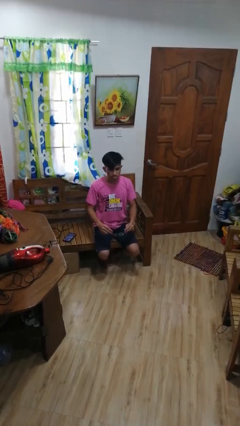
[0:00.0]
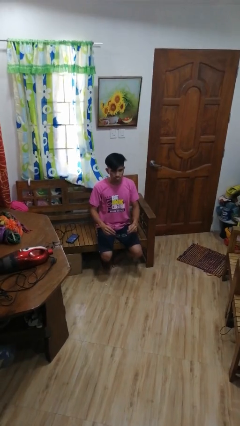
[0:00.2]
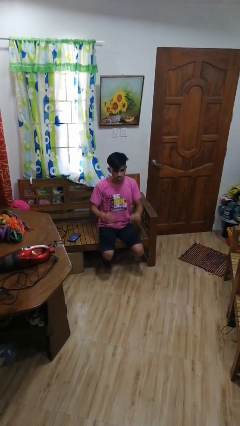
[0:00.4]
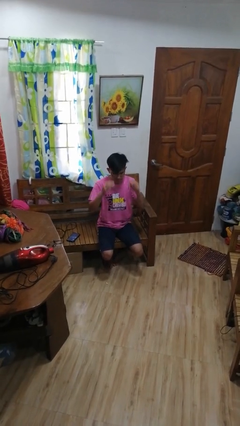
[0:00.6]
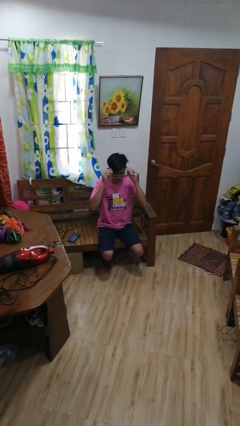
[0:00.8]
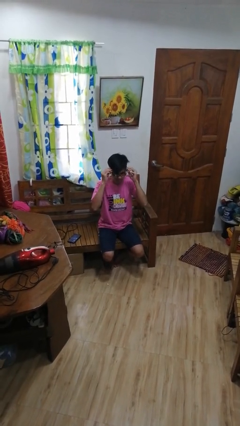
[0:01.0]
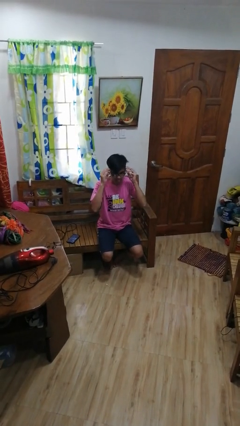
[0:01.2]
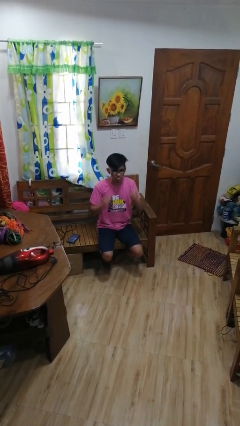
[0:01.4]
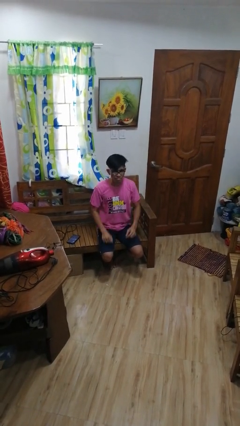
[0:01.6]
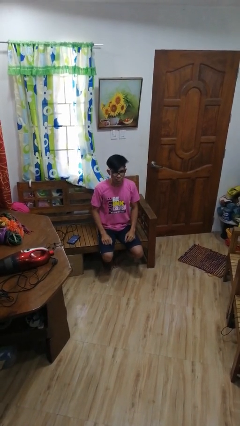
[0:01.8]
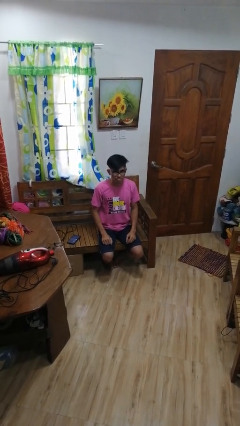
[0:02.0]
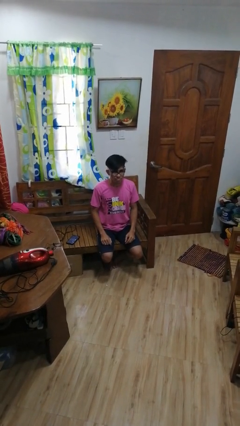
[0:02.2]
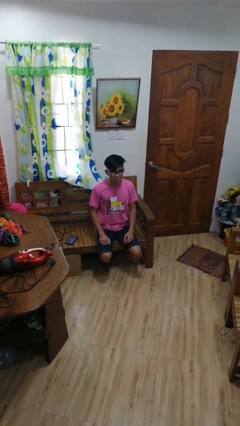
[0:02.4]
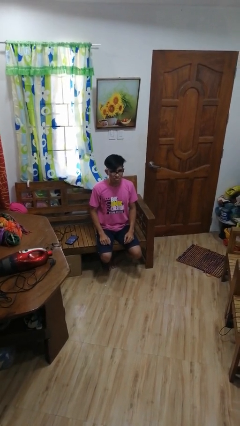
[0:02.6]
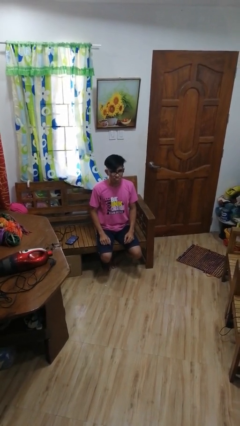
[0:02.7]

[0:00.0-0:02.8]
person puts on glasses

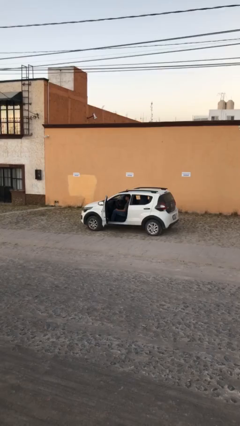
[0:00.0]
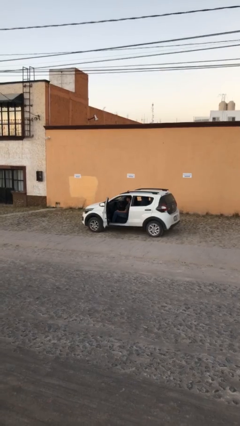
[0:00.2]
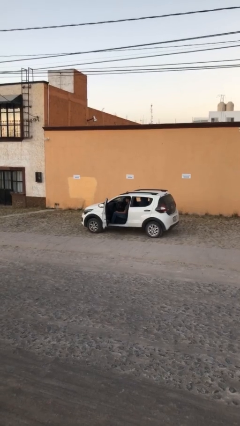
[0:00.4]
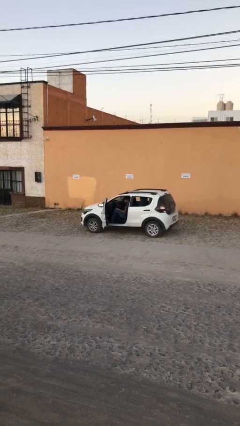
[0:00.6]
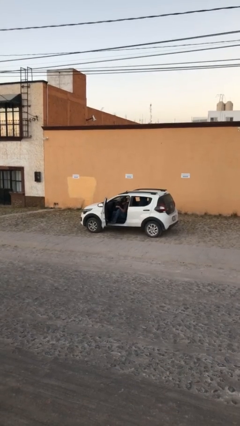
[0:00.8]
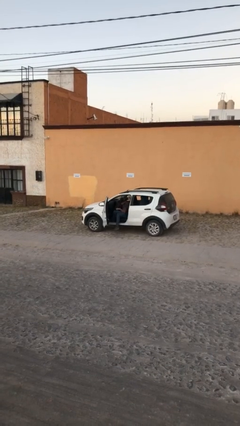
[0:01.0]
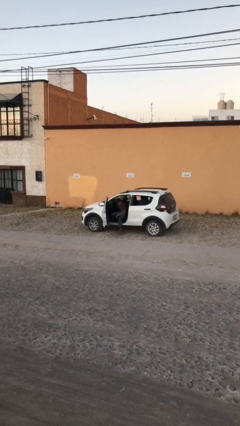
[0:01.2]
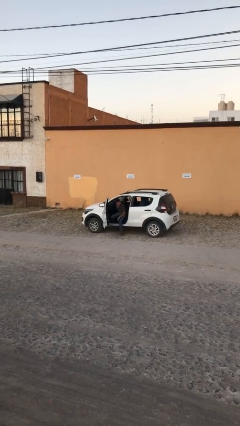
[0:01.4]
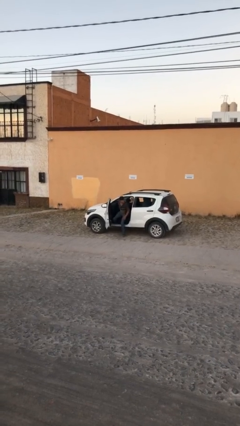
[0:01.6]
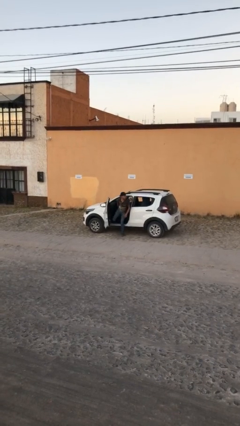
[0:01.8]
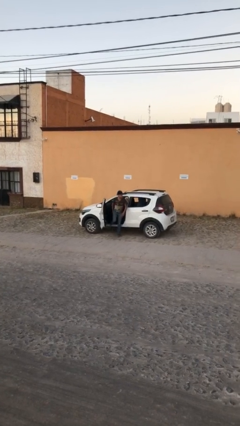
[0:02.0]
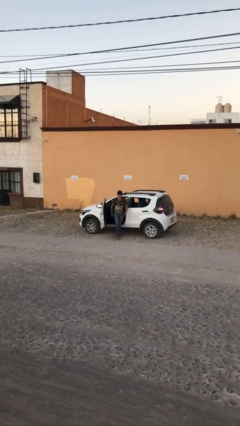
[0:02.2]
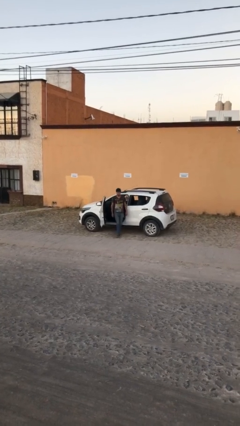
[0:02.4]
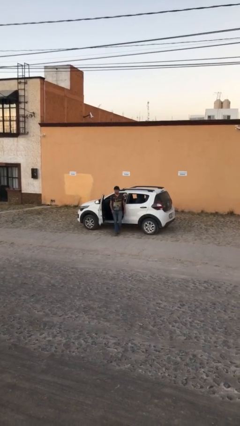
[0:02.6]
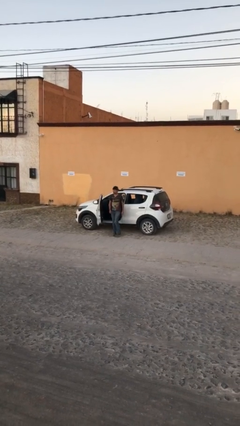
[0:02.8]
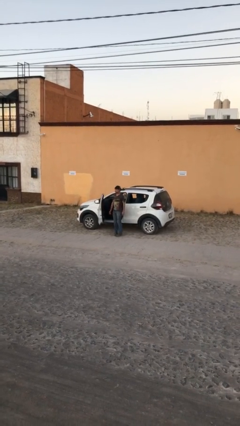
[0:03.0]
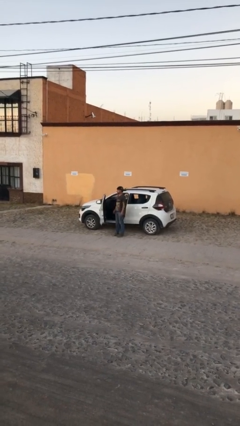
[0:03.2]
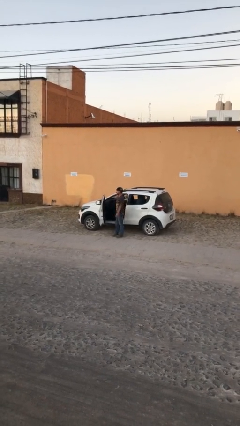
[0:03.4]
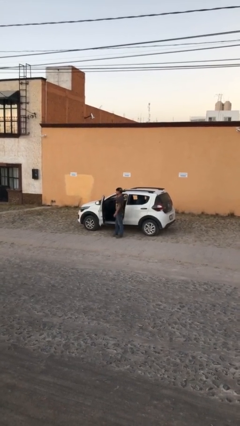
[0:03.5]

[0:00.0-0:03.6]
person exits car

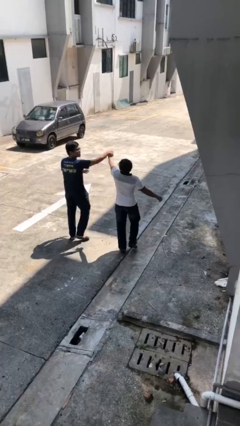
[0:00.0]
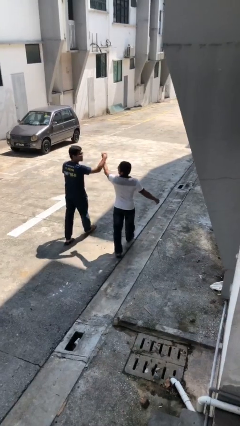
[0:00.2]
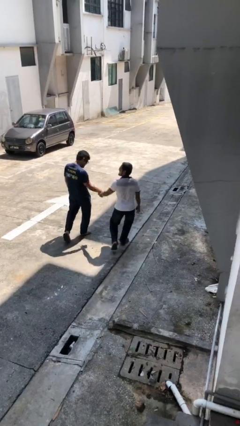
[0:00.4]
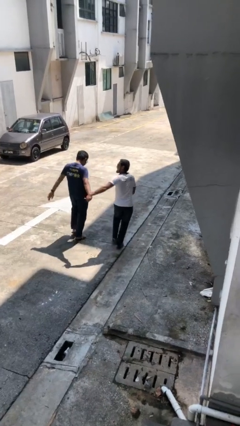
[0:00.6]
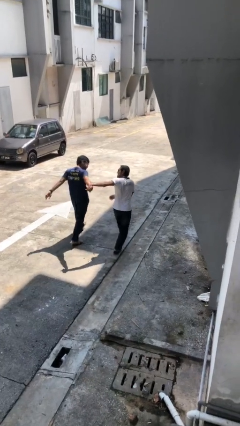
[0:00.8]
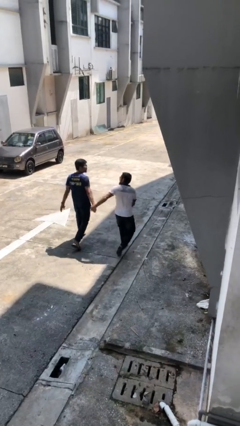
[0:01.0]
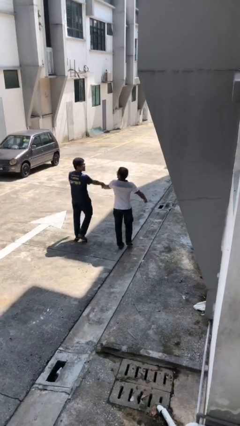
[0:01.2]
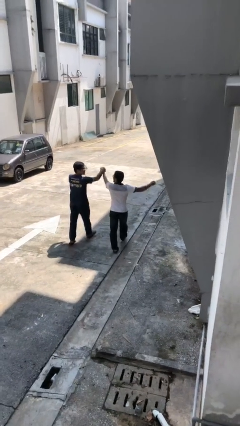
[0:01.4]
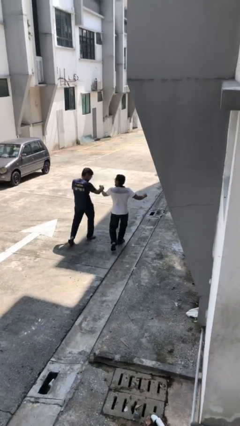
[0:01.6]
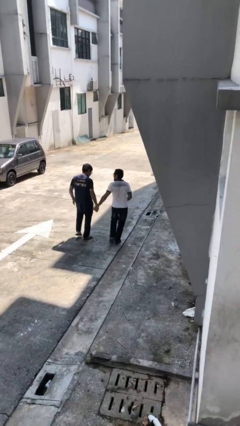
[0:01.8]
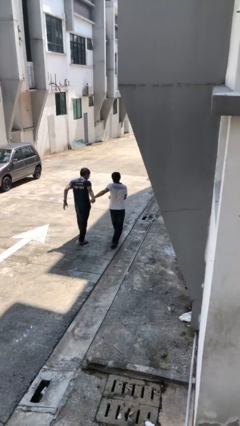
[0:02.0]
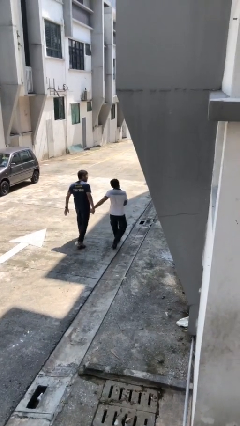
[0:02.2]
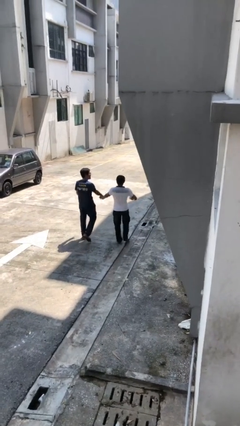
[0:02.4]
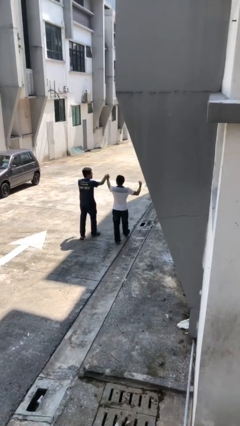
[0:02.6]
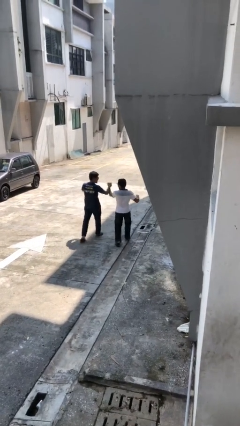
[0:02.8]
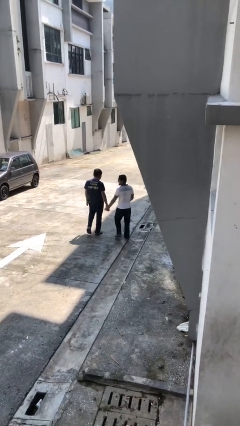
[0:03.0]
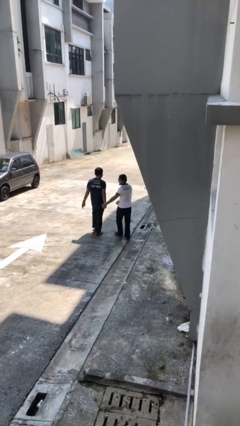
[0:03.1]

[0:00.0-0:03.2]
person holds hand

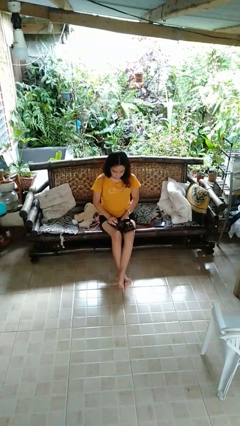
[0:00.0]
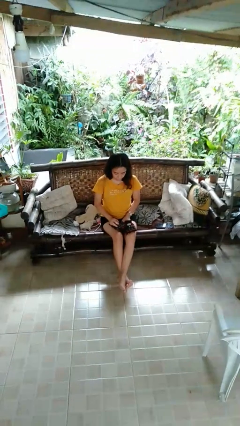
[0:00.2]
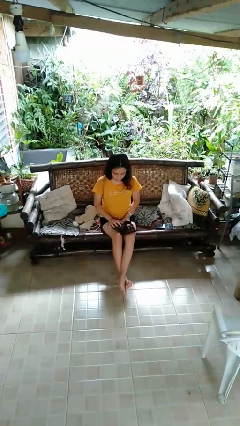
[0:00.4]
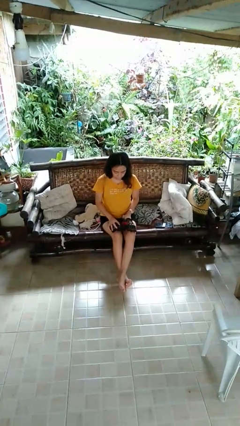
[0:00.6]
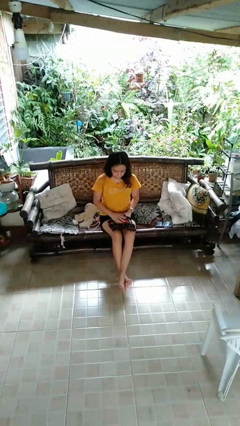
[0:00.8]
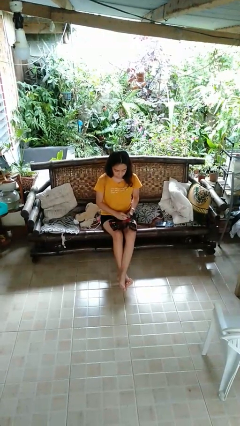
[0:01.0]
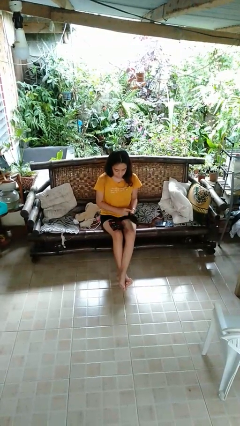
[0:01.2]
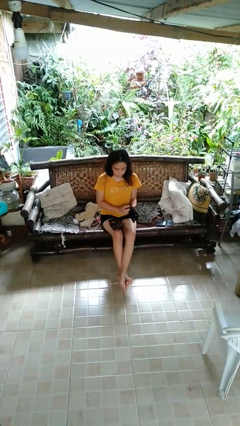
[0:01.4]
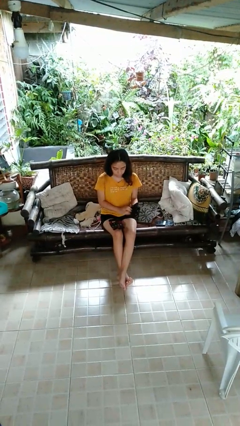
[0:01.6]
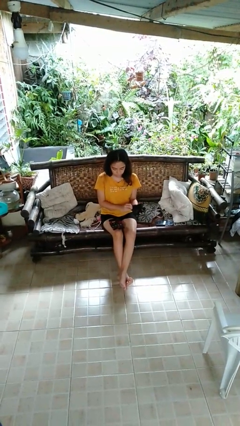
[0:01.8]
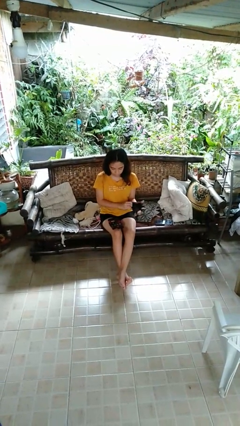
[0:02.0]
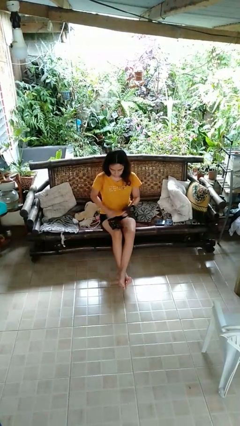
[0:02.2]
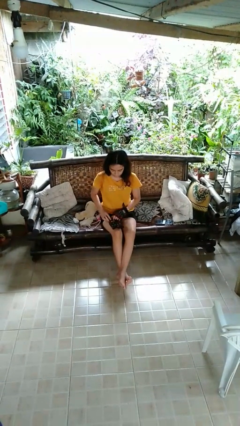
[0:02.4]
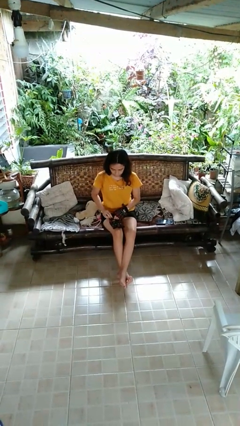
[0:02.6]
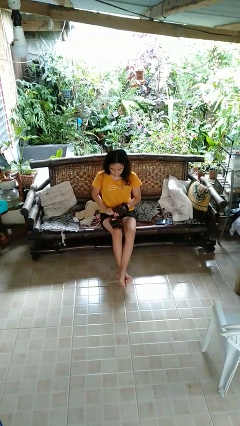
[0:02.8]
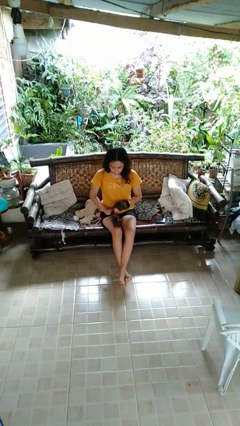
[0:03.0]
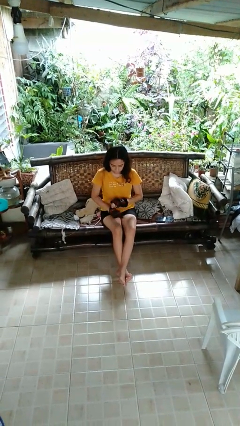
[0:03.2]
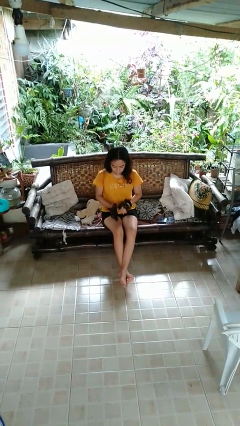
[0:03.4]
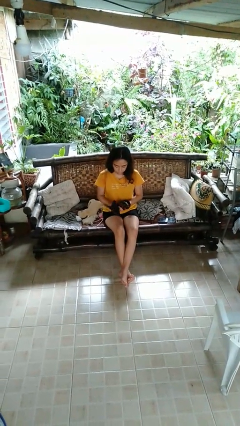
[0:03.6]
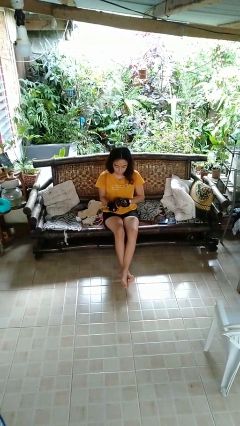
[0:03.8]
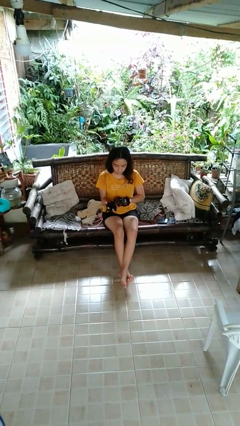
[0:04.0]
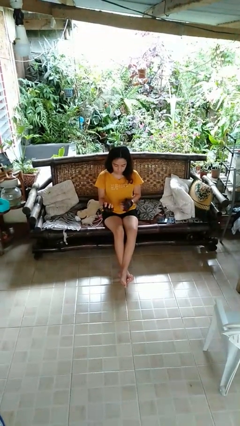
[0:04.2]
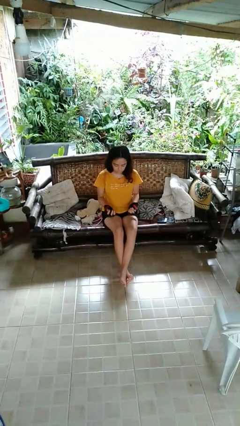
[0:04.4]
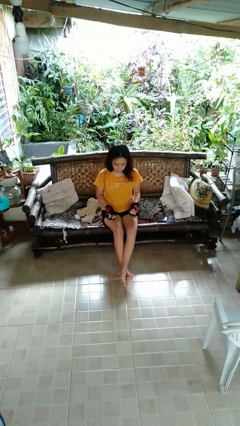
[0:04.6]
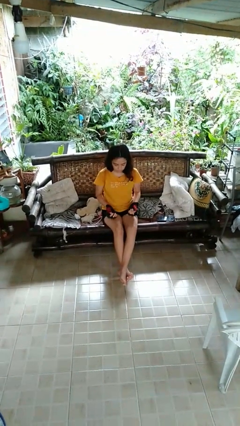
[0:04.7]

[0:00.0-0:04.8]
person puts on gloves

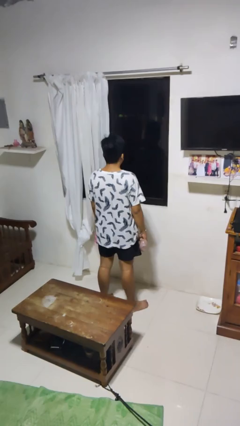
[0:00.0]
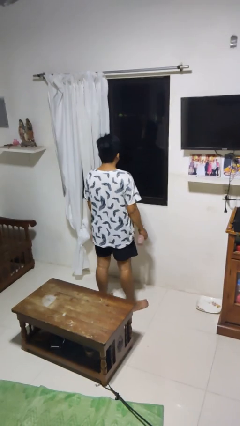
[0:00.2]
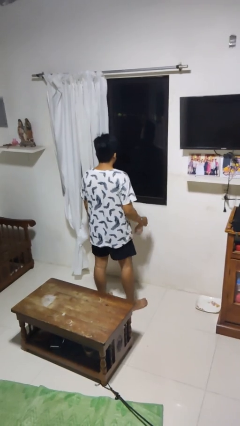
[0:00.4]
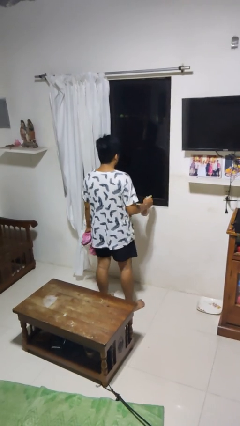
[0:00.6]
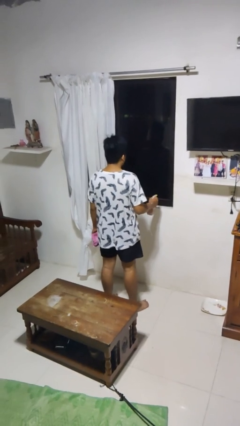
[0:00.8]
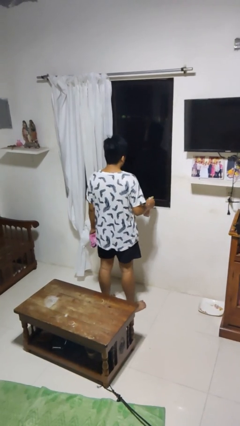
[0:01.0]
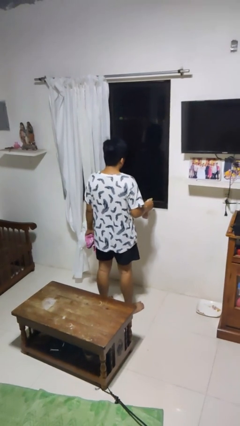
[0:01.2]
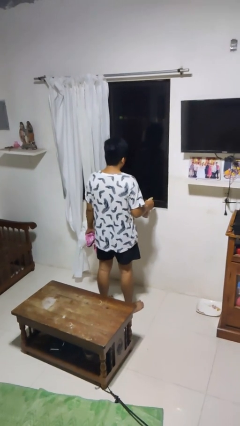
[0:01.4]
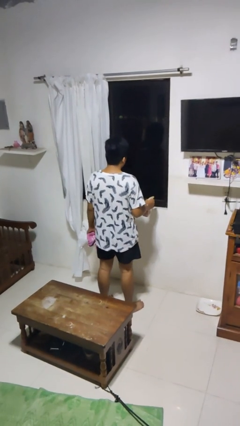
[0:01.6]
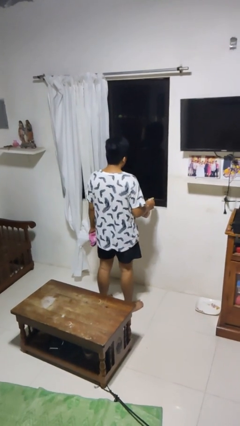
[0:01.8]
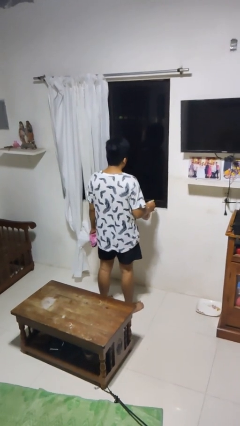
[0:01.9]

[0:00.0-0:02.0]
person sprays from bottle

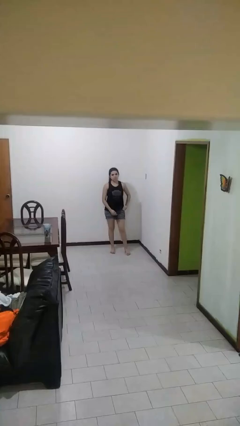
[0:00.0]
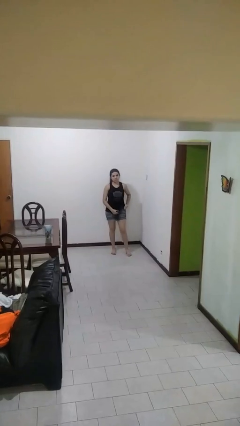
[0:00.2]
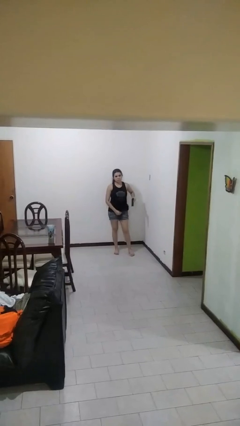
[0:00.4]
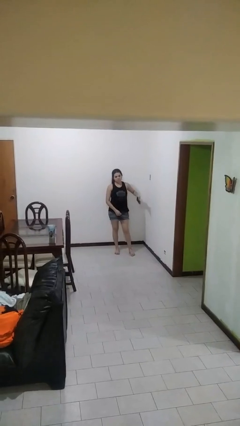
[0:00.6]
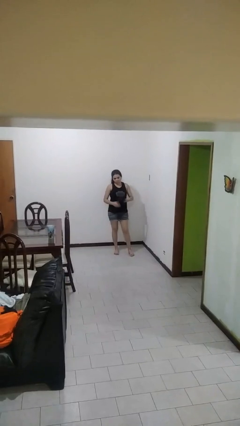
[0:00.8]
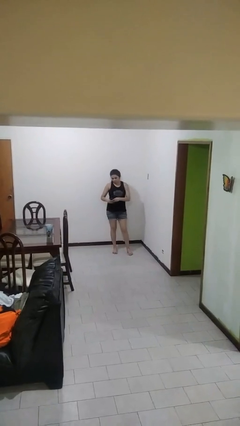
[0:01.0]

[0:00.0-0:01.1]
person takes phone from pocket
